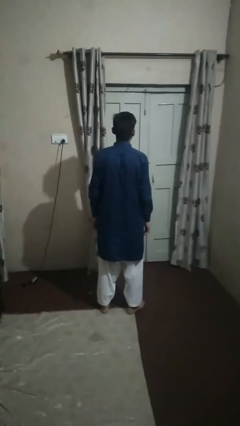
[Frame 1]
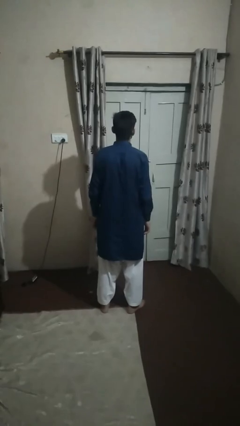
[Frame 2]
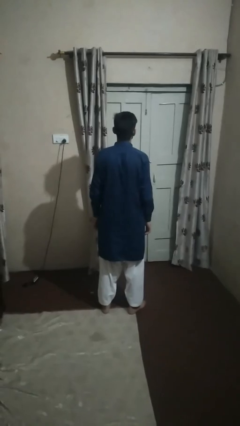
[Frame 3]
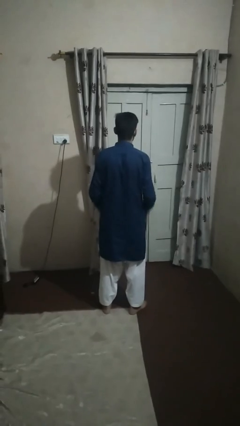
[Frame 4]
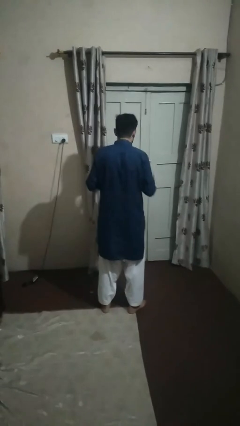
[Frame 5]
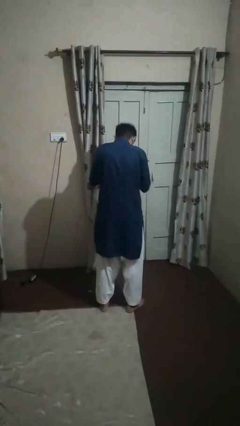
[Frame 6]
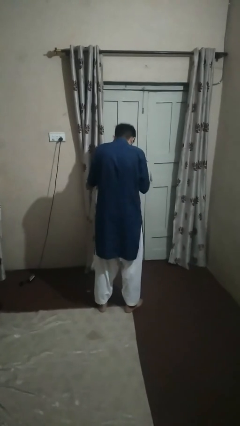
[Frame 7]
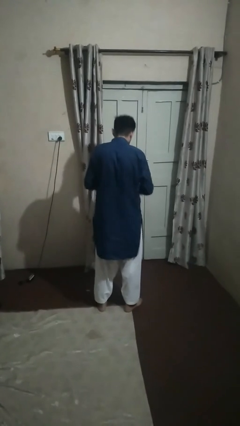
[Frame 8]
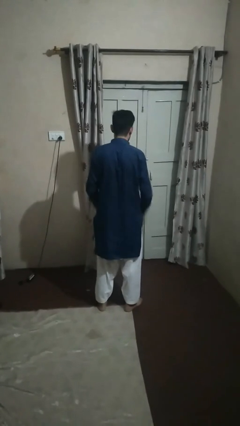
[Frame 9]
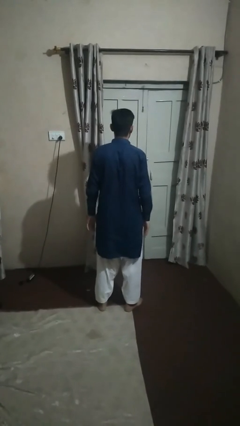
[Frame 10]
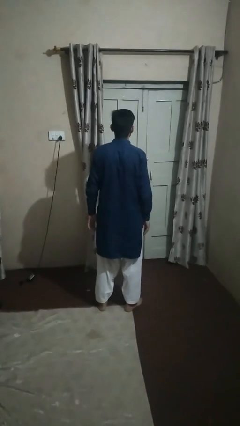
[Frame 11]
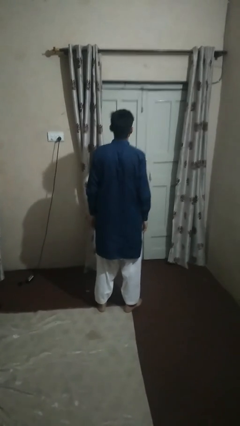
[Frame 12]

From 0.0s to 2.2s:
person sneezes into hand

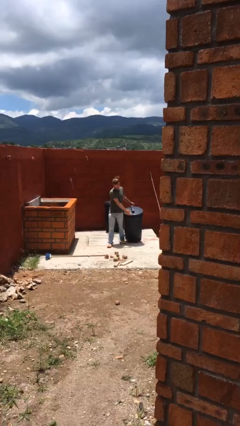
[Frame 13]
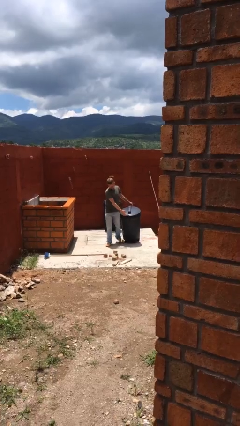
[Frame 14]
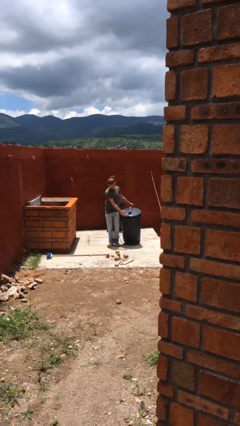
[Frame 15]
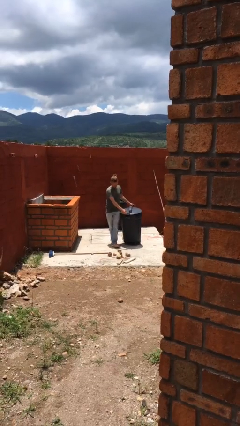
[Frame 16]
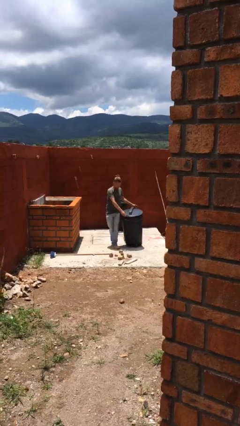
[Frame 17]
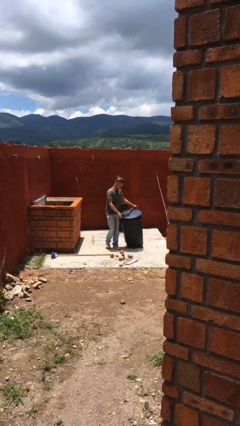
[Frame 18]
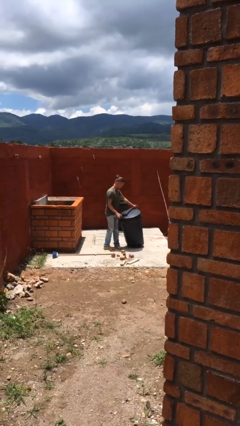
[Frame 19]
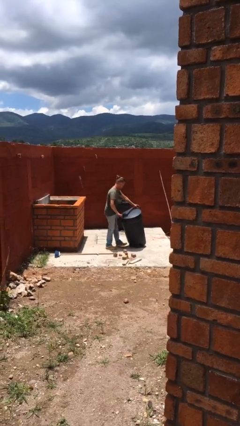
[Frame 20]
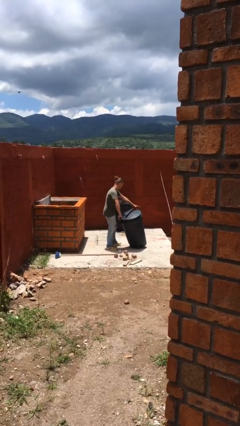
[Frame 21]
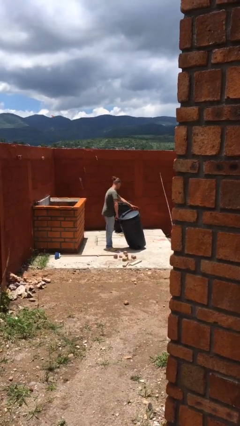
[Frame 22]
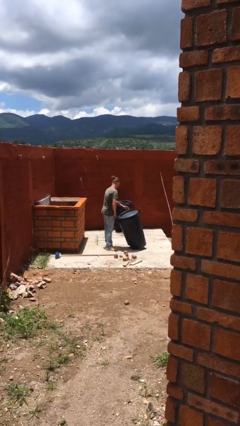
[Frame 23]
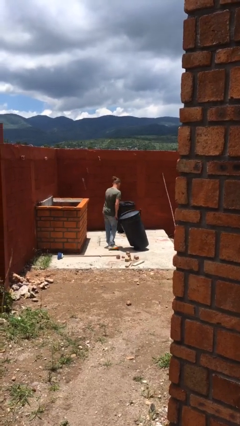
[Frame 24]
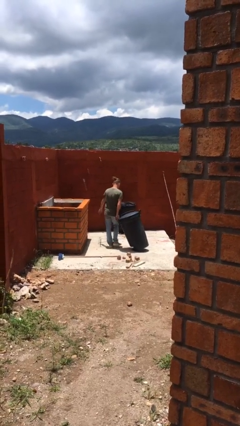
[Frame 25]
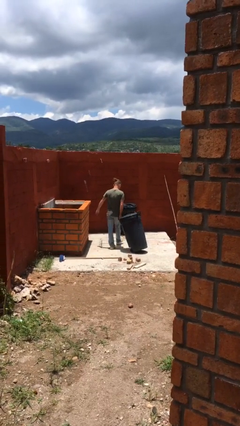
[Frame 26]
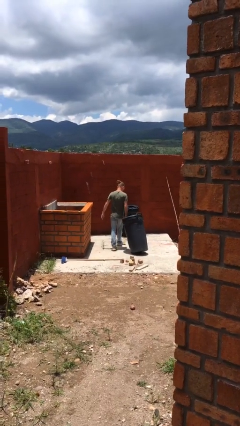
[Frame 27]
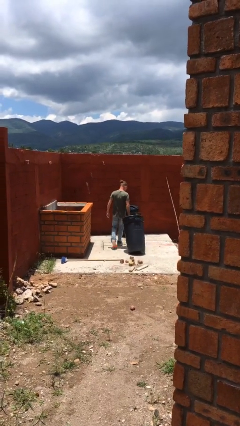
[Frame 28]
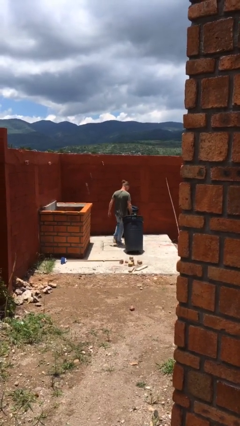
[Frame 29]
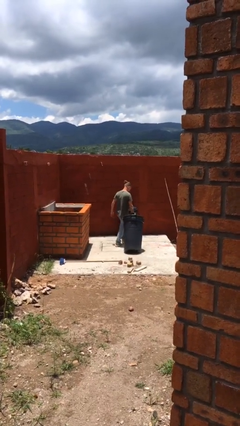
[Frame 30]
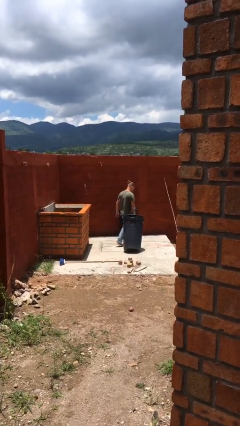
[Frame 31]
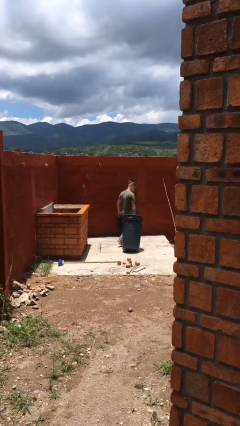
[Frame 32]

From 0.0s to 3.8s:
person pulls wheeled trashcan

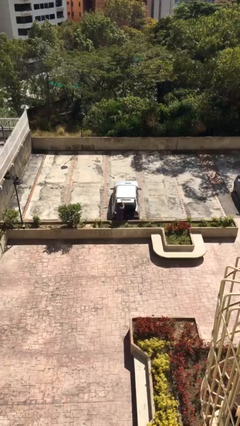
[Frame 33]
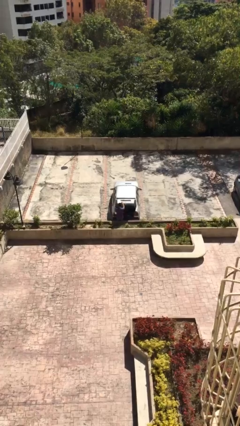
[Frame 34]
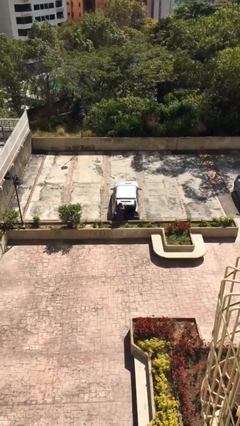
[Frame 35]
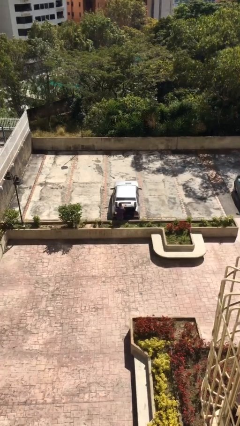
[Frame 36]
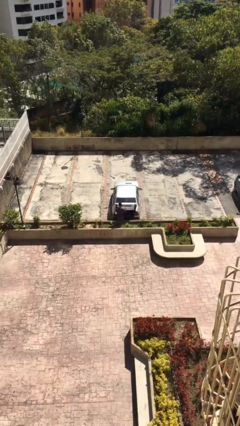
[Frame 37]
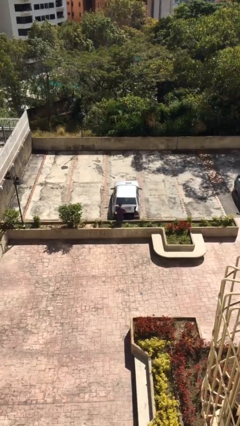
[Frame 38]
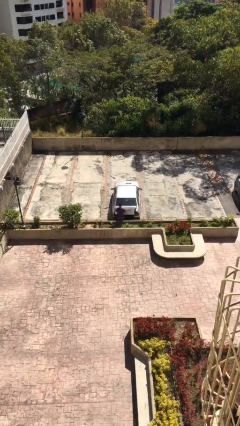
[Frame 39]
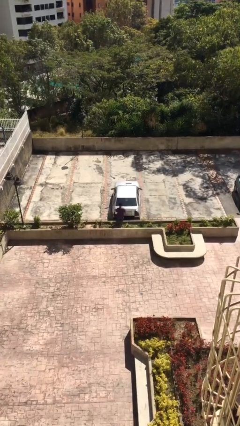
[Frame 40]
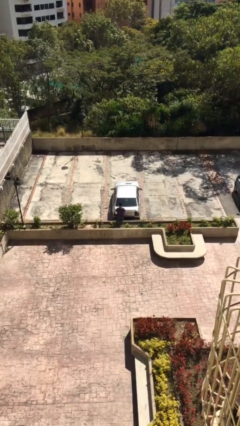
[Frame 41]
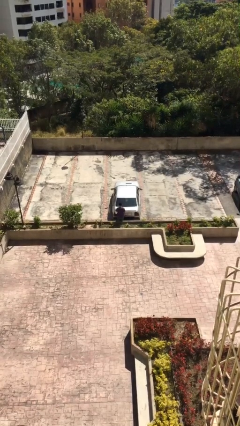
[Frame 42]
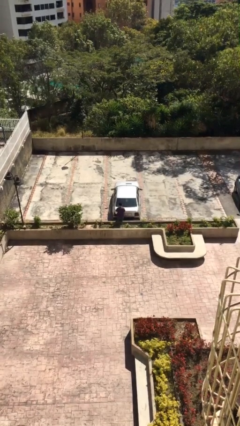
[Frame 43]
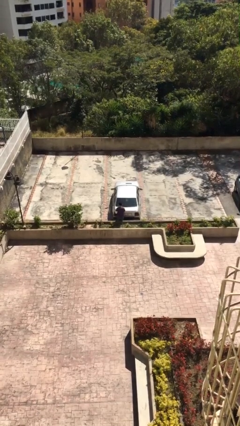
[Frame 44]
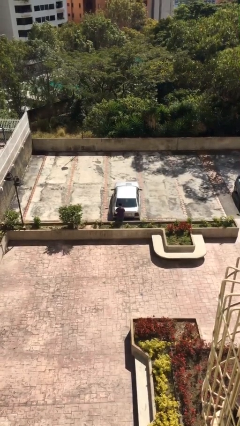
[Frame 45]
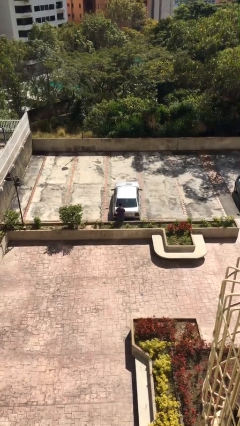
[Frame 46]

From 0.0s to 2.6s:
person closes car trunk

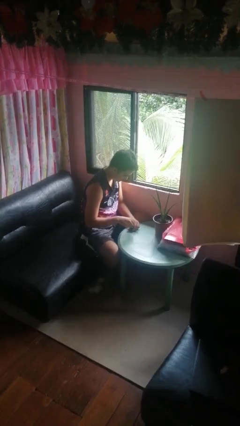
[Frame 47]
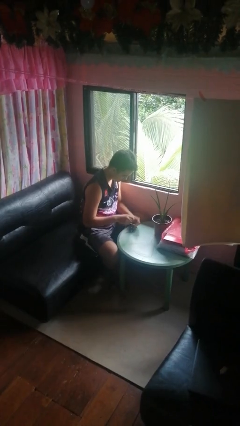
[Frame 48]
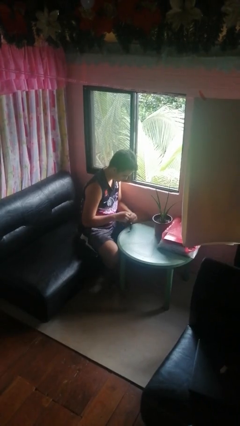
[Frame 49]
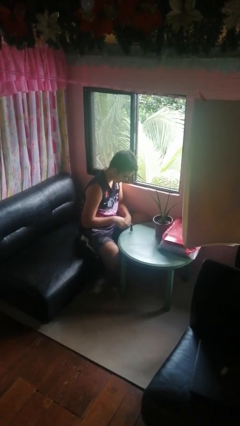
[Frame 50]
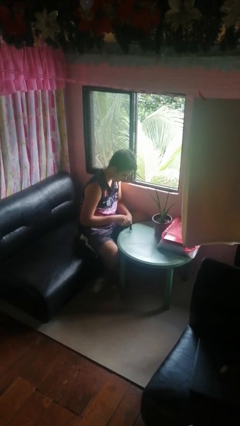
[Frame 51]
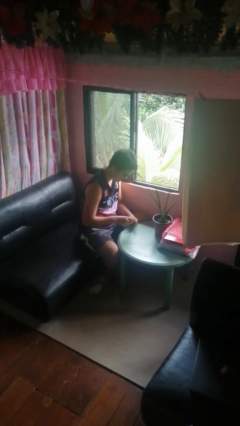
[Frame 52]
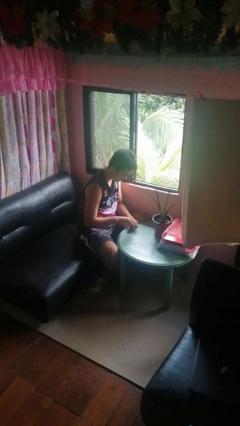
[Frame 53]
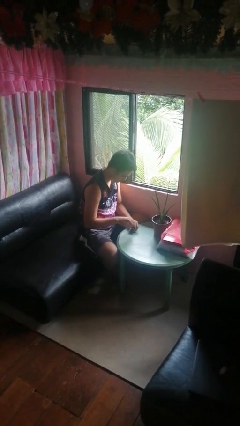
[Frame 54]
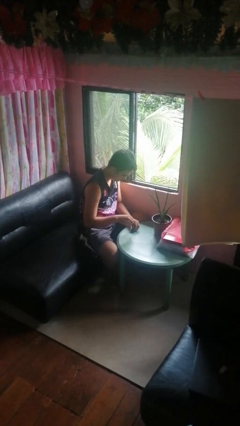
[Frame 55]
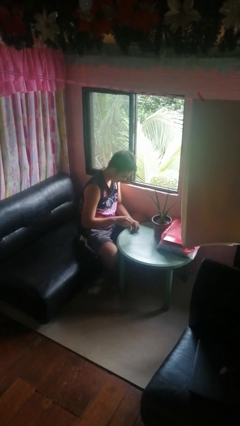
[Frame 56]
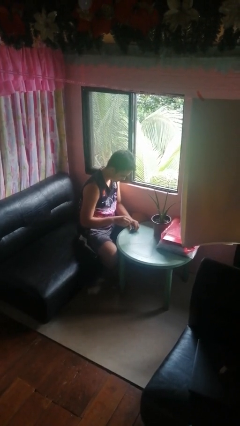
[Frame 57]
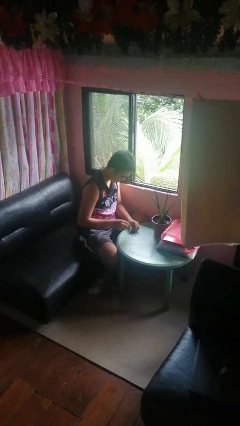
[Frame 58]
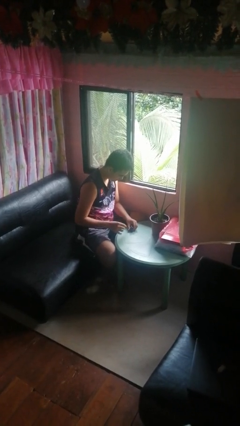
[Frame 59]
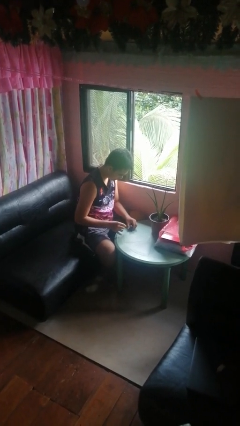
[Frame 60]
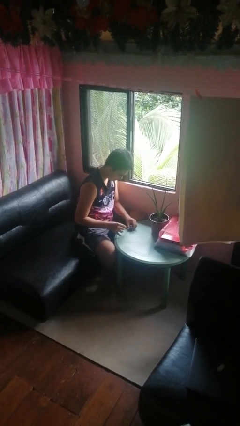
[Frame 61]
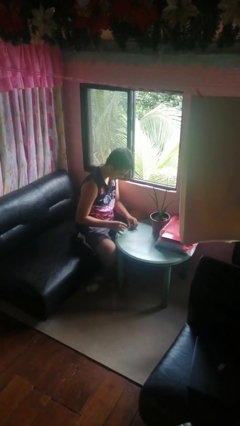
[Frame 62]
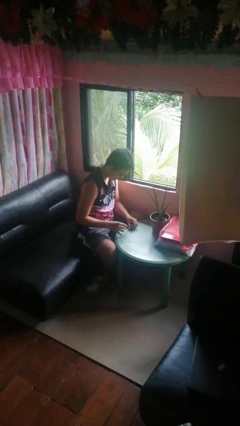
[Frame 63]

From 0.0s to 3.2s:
person paints fingernails

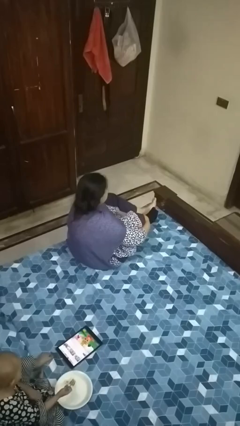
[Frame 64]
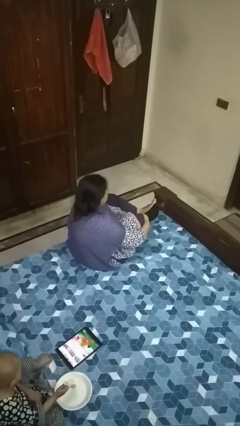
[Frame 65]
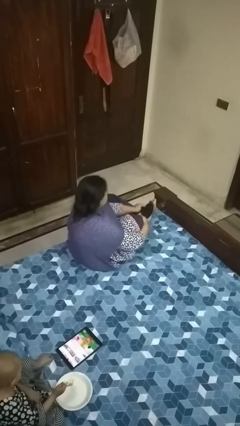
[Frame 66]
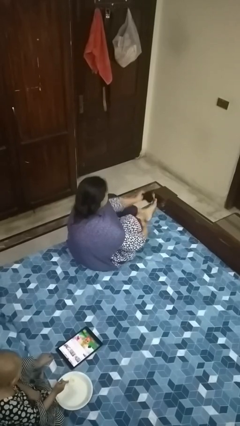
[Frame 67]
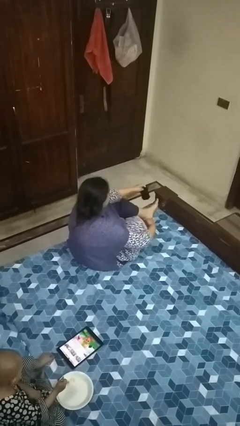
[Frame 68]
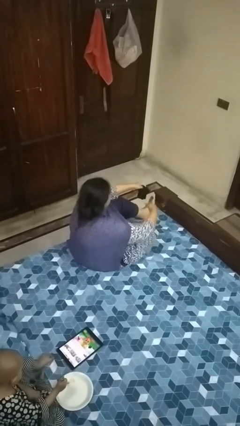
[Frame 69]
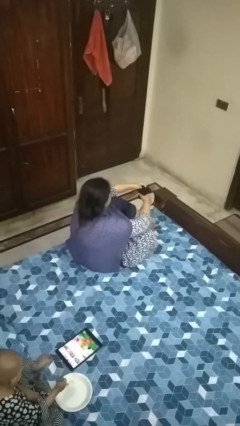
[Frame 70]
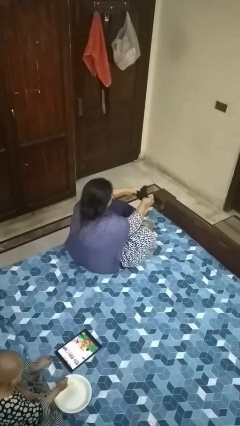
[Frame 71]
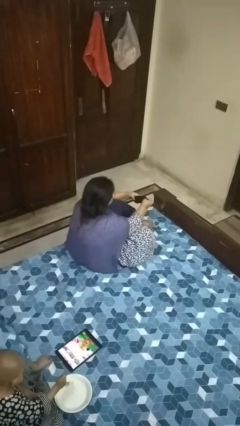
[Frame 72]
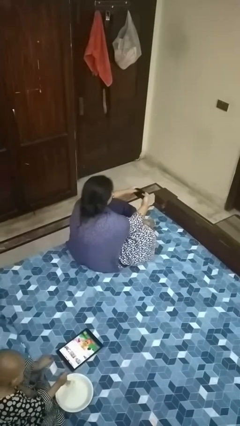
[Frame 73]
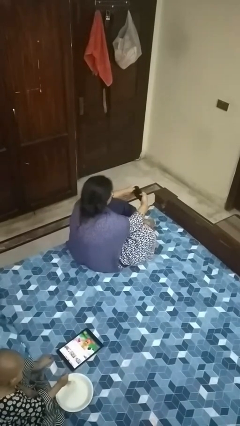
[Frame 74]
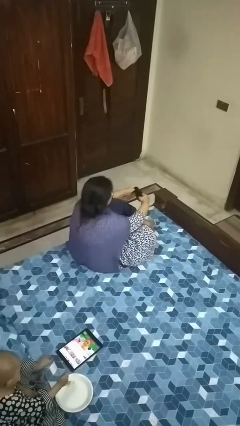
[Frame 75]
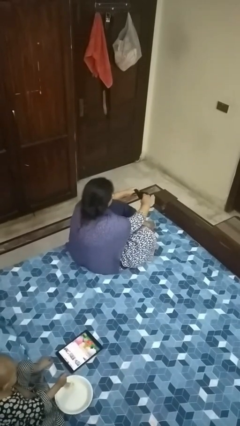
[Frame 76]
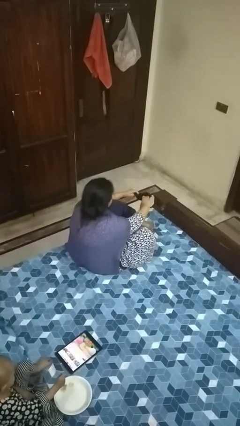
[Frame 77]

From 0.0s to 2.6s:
person takes off socks

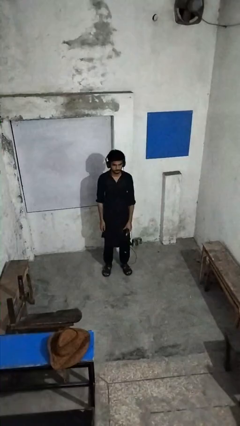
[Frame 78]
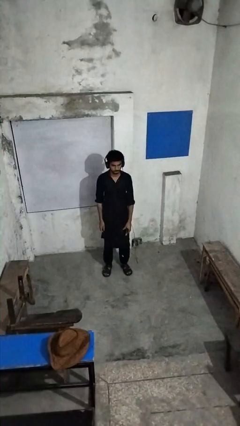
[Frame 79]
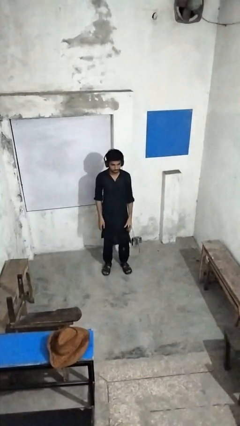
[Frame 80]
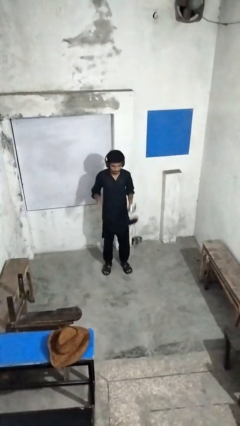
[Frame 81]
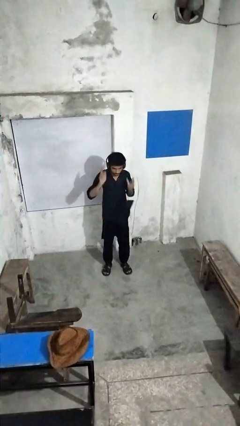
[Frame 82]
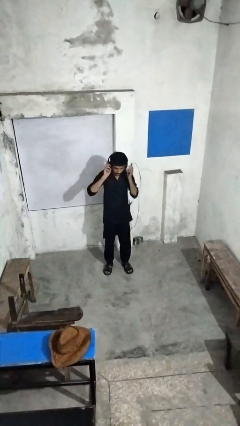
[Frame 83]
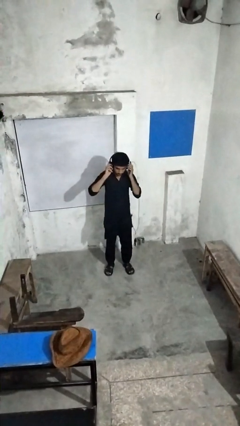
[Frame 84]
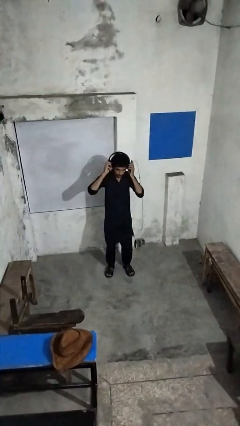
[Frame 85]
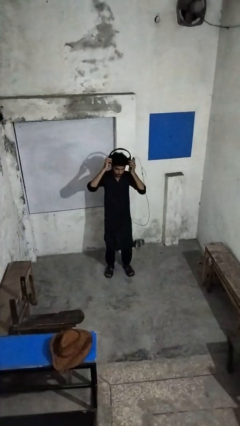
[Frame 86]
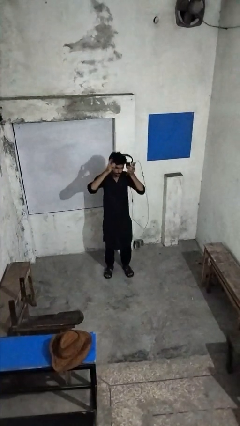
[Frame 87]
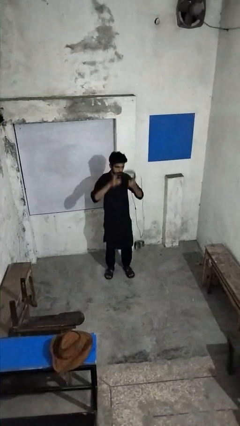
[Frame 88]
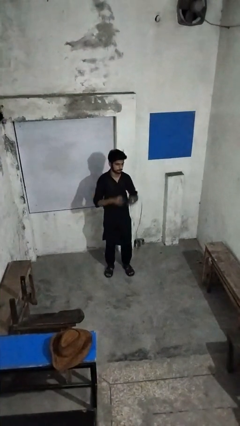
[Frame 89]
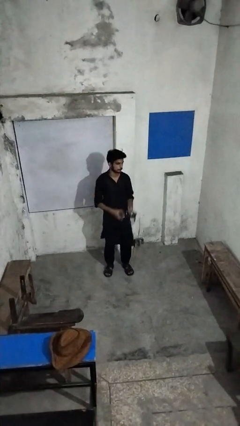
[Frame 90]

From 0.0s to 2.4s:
person takes off headphones

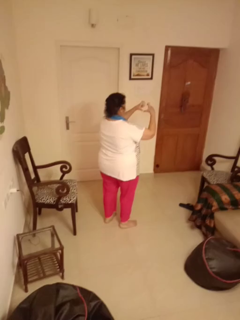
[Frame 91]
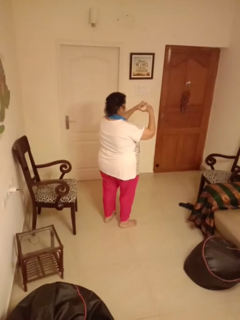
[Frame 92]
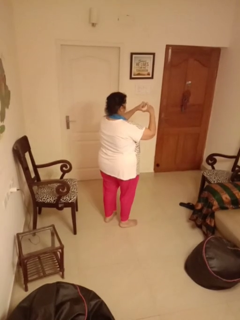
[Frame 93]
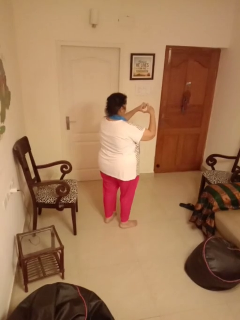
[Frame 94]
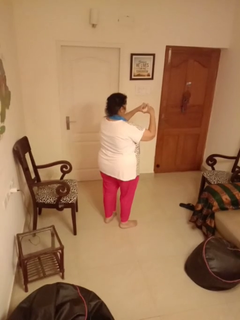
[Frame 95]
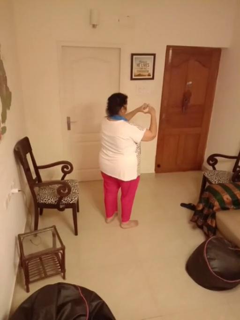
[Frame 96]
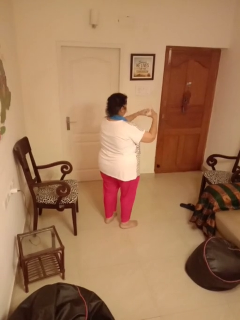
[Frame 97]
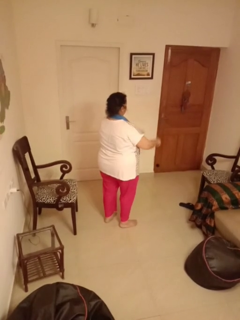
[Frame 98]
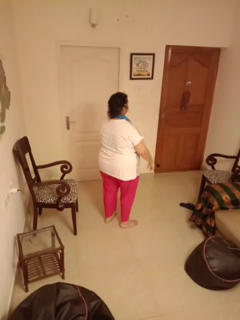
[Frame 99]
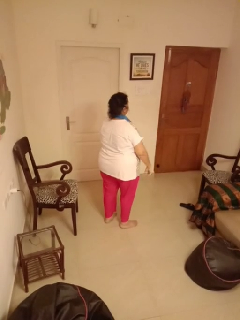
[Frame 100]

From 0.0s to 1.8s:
person gestures heart
